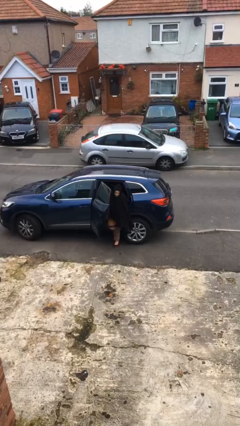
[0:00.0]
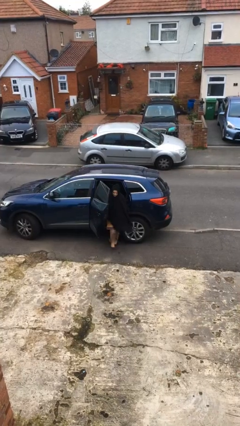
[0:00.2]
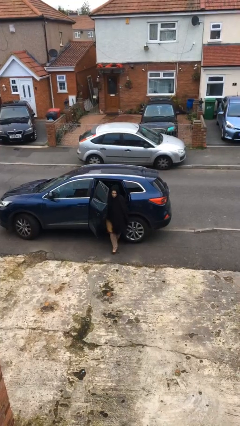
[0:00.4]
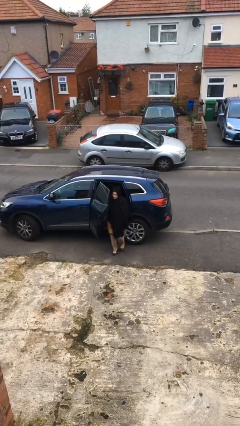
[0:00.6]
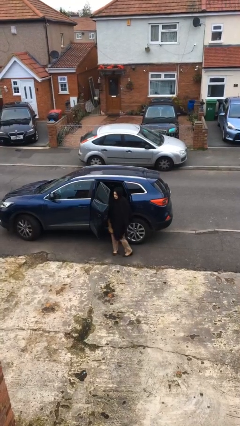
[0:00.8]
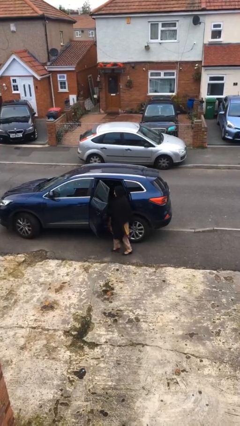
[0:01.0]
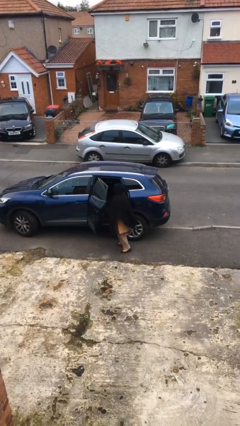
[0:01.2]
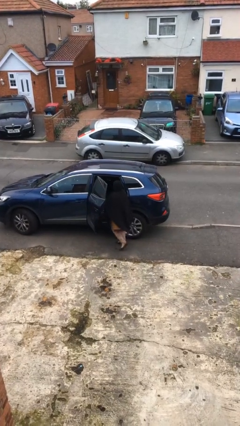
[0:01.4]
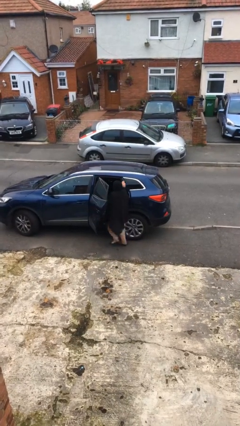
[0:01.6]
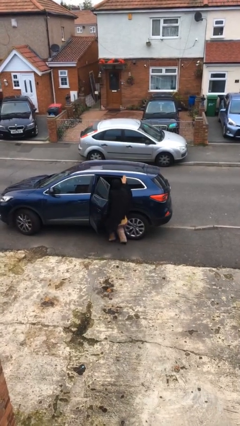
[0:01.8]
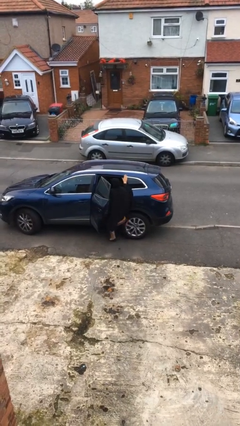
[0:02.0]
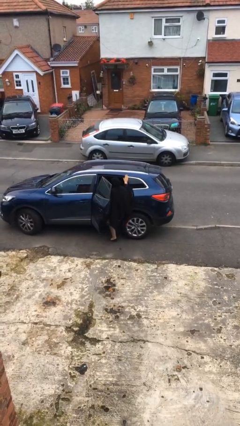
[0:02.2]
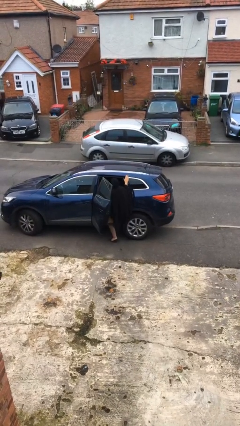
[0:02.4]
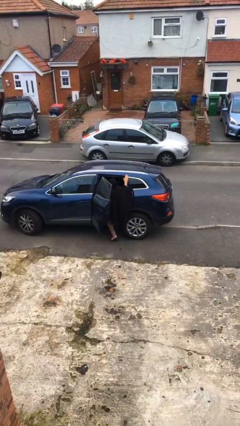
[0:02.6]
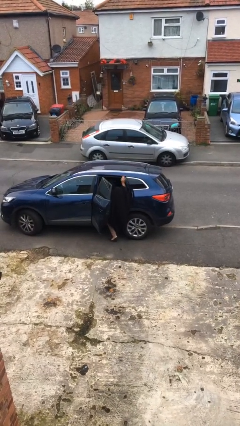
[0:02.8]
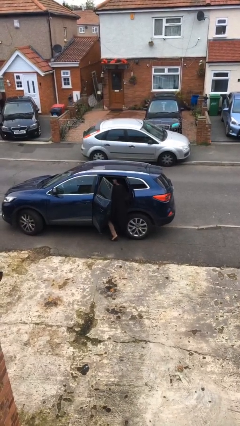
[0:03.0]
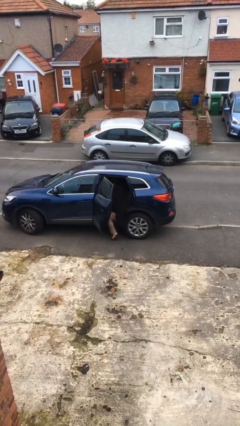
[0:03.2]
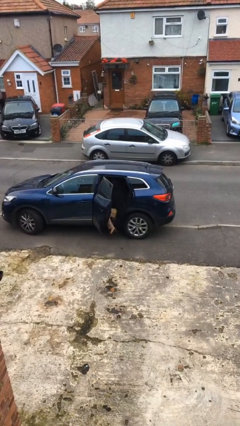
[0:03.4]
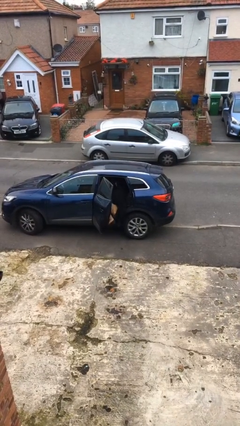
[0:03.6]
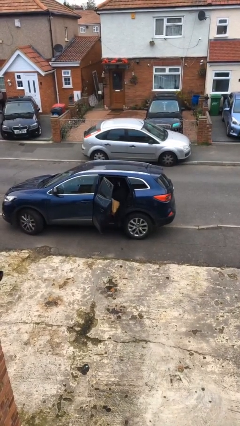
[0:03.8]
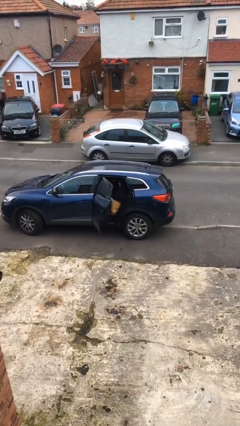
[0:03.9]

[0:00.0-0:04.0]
person enters car

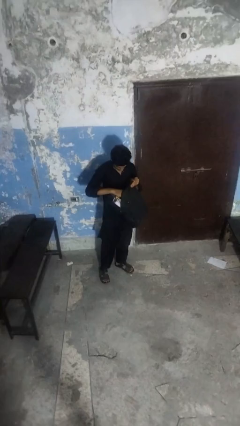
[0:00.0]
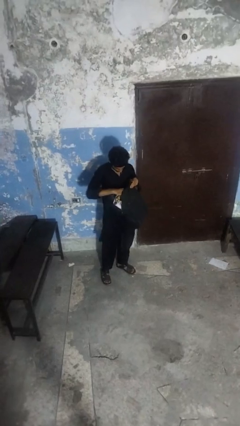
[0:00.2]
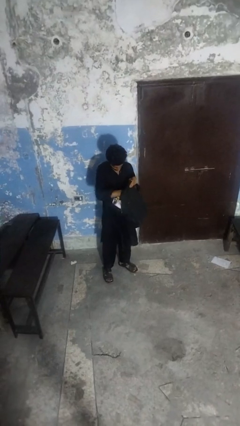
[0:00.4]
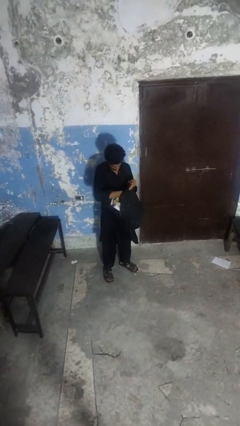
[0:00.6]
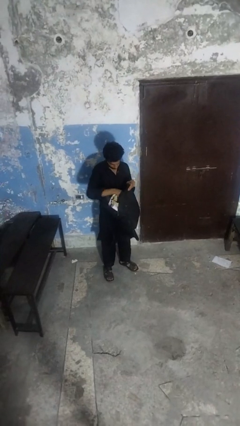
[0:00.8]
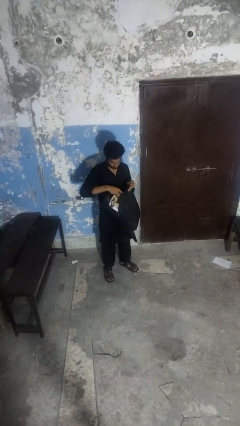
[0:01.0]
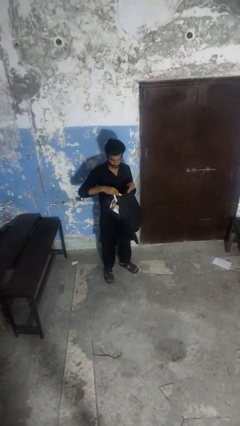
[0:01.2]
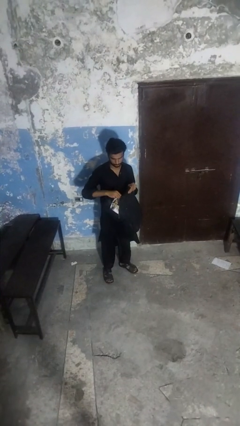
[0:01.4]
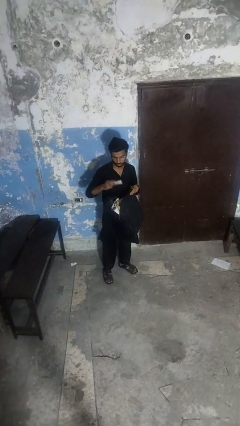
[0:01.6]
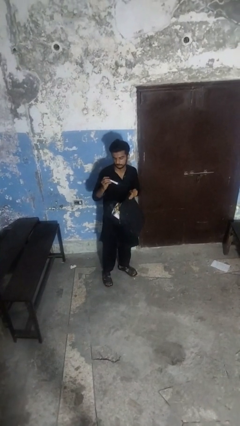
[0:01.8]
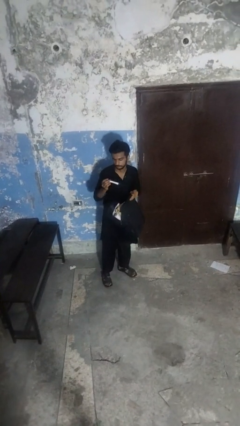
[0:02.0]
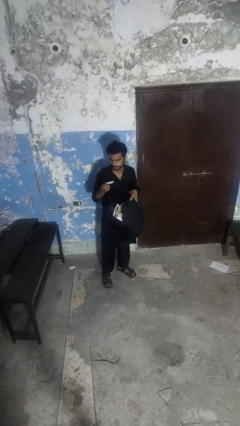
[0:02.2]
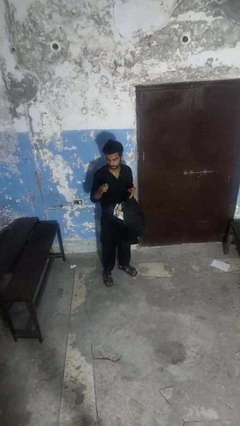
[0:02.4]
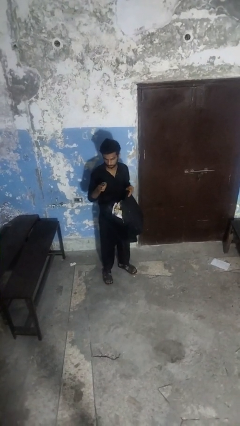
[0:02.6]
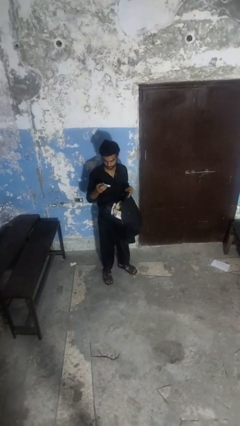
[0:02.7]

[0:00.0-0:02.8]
person takes object from backpack

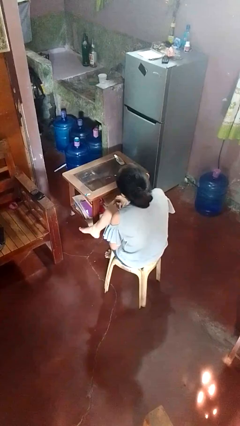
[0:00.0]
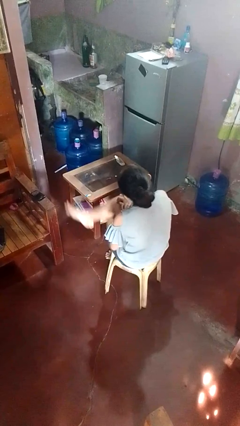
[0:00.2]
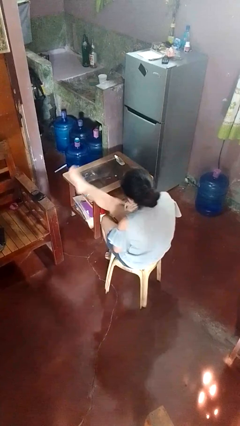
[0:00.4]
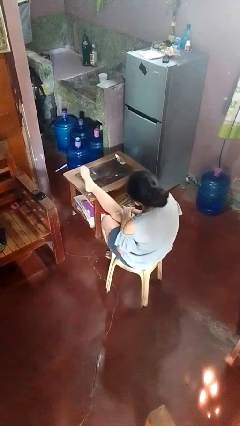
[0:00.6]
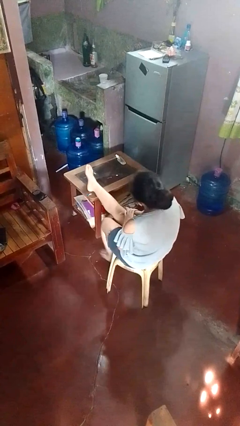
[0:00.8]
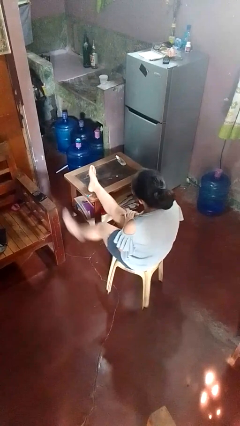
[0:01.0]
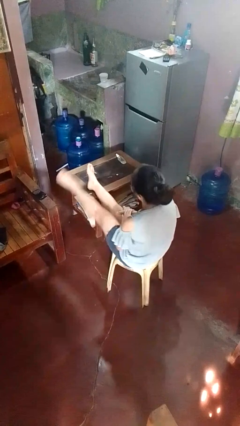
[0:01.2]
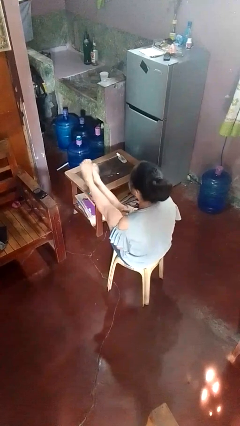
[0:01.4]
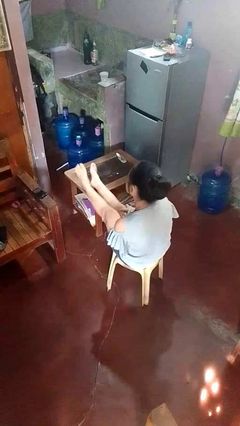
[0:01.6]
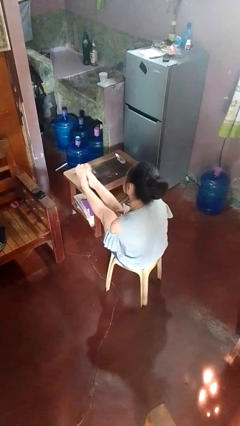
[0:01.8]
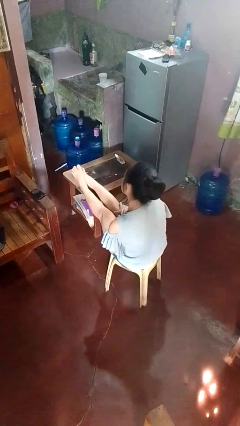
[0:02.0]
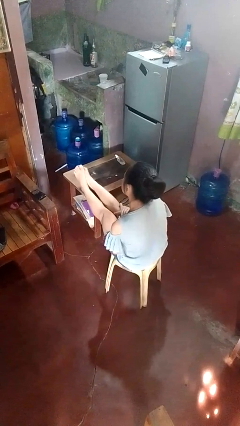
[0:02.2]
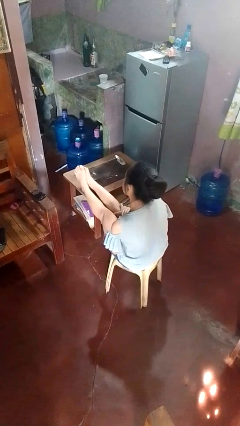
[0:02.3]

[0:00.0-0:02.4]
person puts feet up

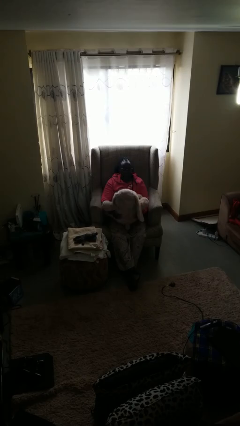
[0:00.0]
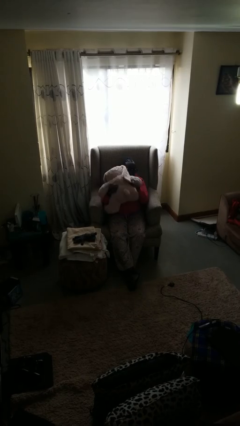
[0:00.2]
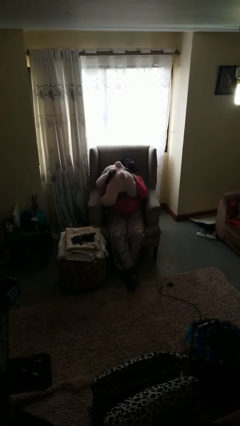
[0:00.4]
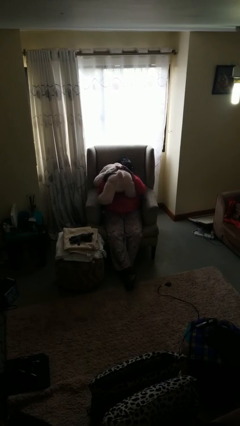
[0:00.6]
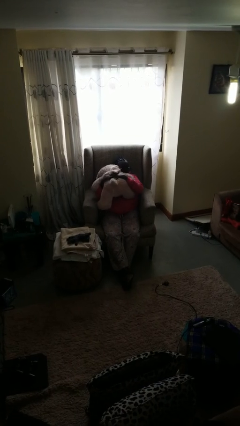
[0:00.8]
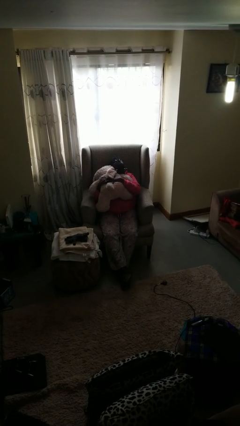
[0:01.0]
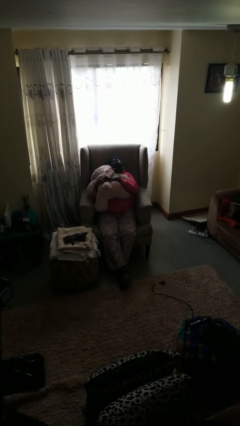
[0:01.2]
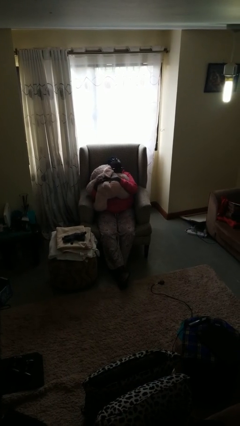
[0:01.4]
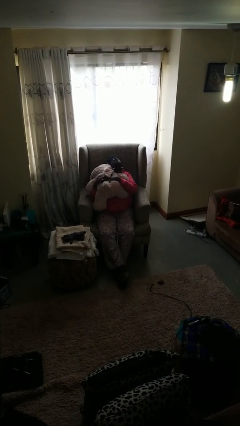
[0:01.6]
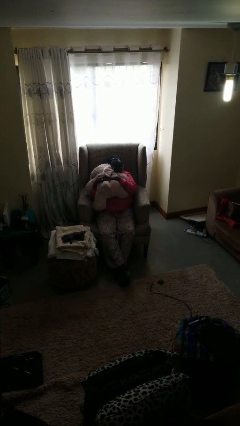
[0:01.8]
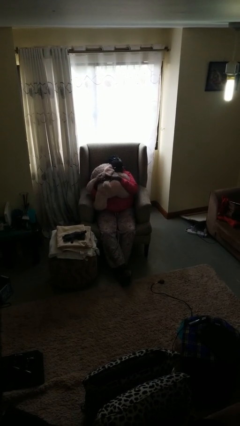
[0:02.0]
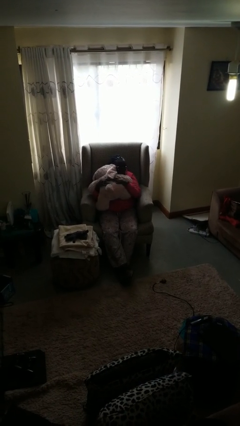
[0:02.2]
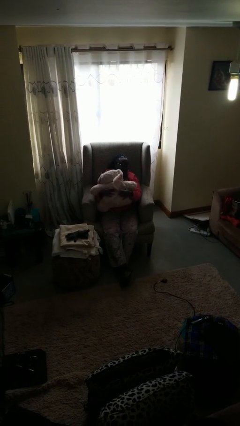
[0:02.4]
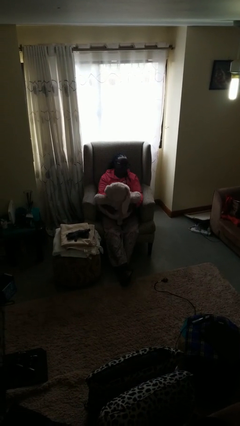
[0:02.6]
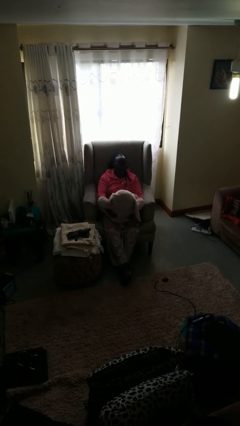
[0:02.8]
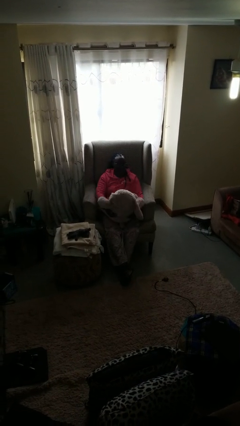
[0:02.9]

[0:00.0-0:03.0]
person hugs stuffed animal

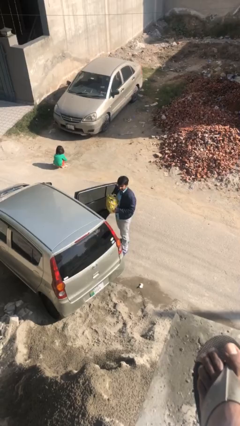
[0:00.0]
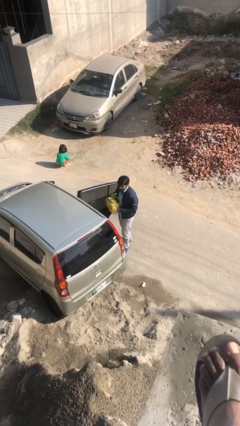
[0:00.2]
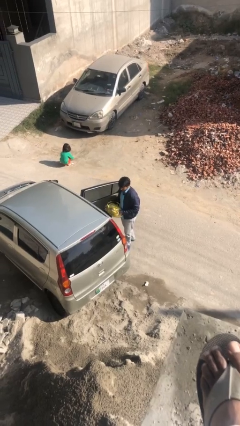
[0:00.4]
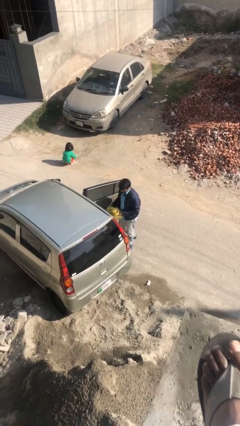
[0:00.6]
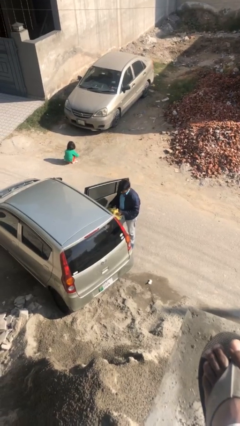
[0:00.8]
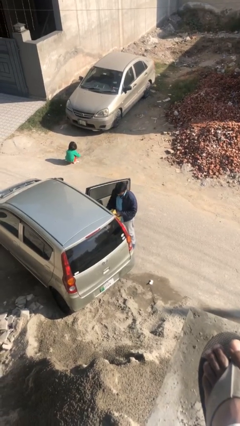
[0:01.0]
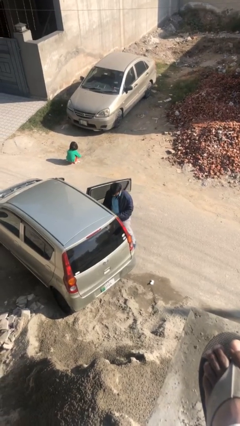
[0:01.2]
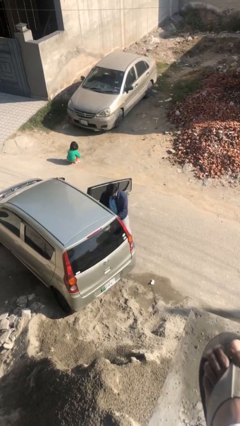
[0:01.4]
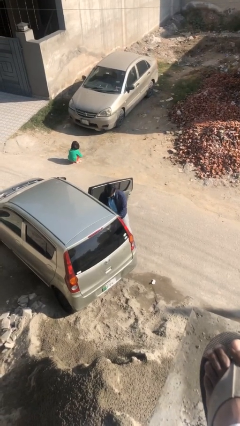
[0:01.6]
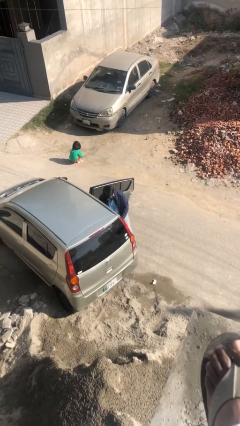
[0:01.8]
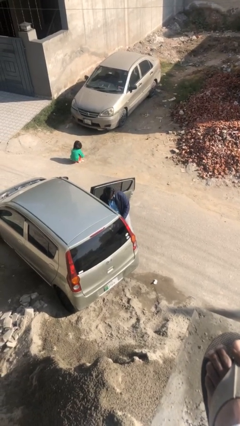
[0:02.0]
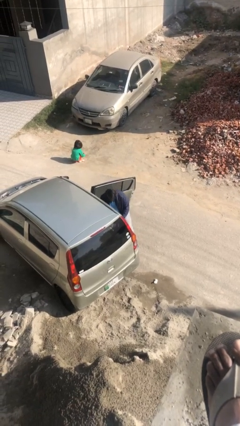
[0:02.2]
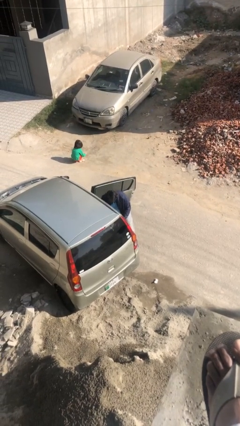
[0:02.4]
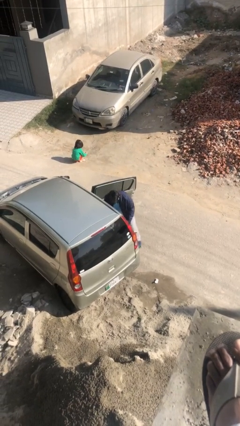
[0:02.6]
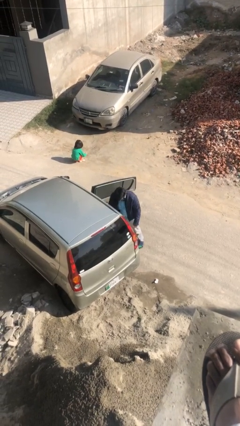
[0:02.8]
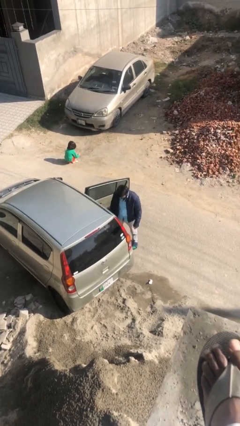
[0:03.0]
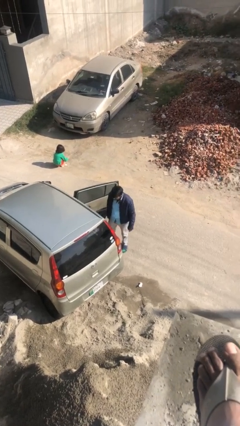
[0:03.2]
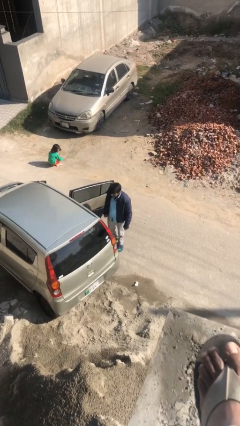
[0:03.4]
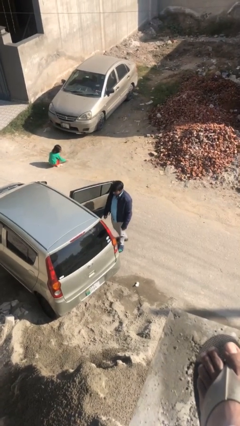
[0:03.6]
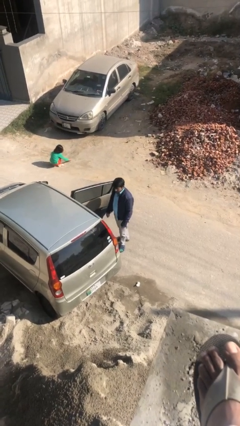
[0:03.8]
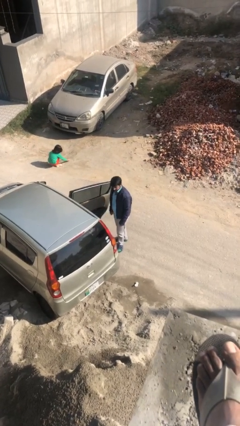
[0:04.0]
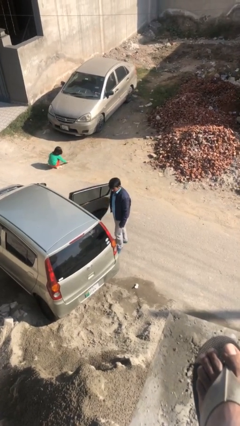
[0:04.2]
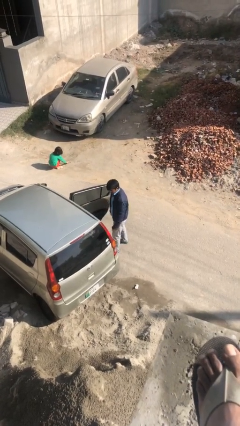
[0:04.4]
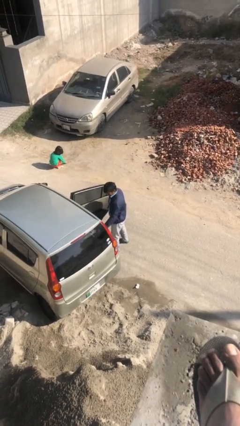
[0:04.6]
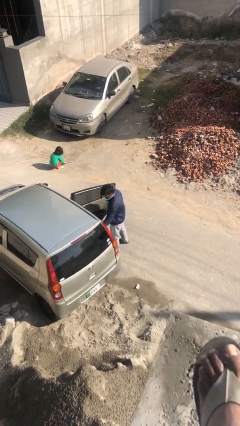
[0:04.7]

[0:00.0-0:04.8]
person loads car

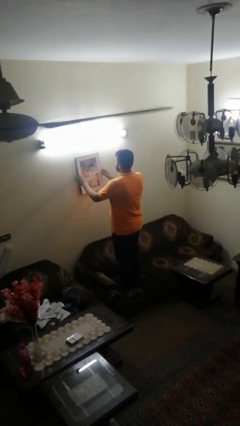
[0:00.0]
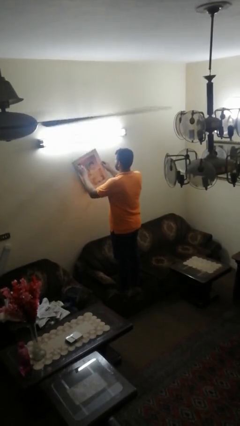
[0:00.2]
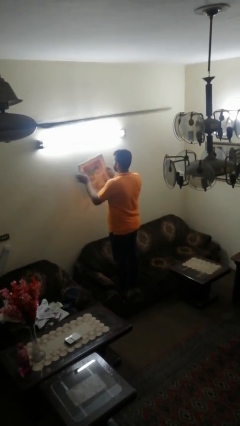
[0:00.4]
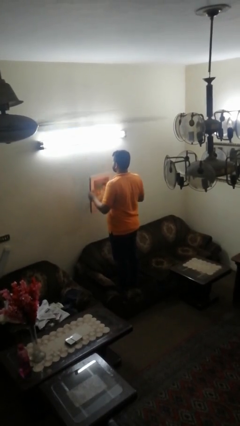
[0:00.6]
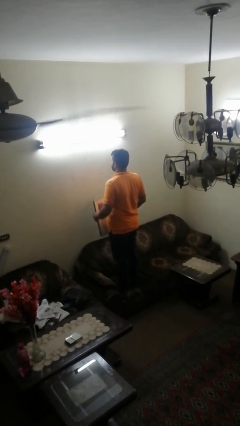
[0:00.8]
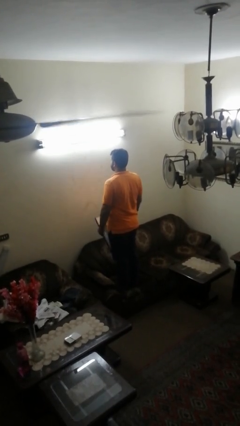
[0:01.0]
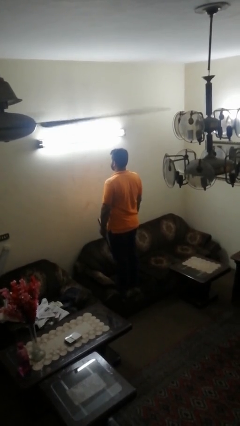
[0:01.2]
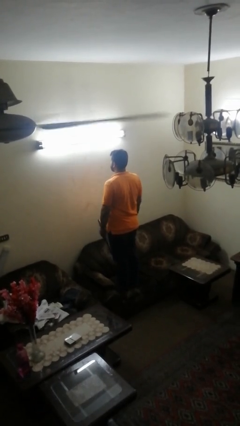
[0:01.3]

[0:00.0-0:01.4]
person takes down picture frame
